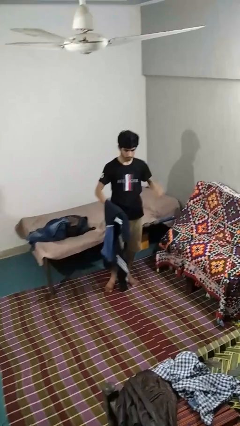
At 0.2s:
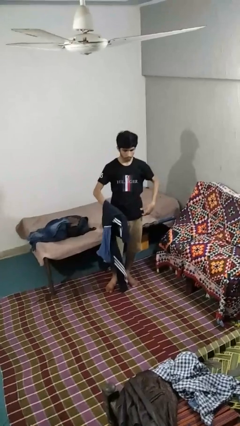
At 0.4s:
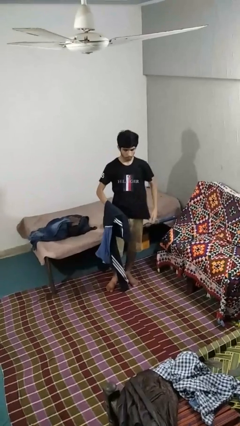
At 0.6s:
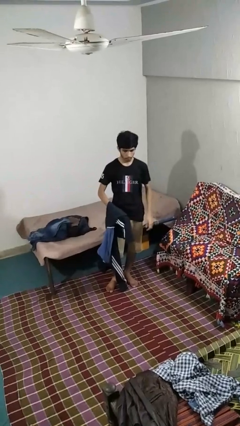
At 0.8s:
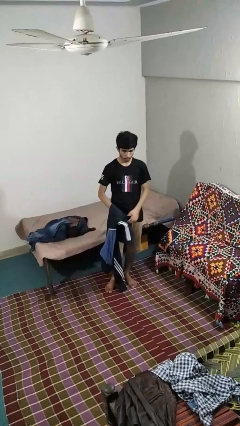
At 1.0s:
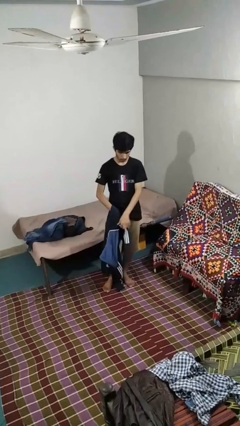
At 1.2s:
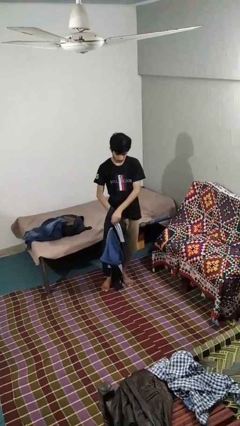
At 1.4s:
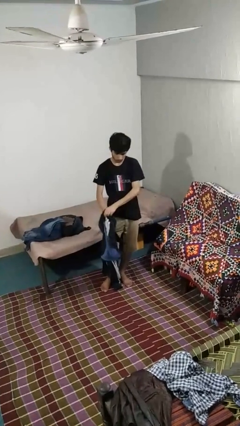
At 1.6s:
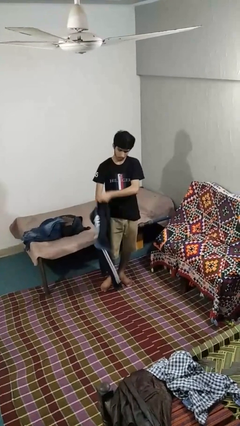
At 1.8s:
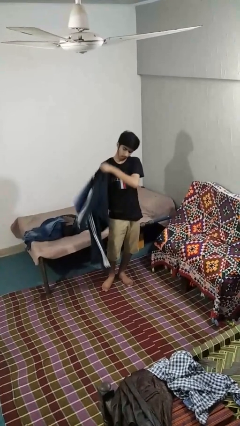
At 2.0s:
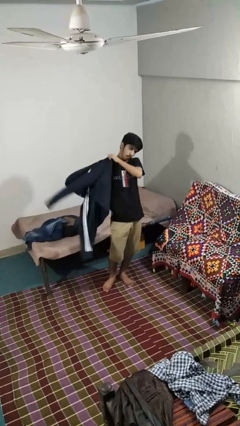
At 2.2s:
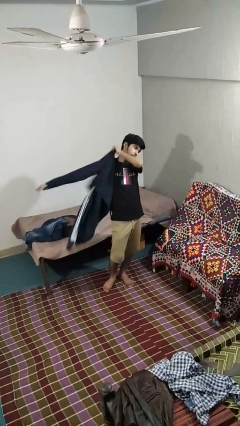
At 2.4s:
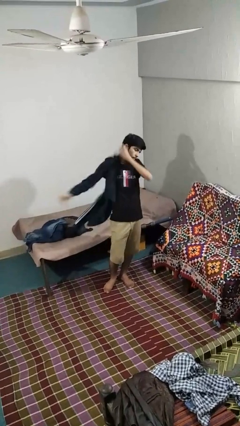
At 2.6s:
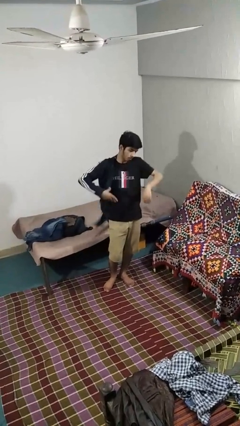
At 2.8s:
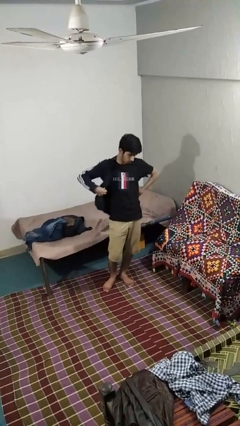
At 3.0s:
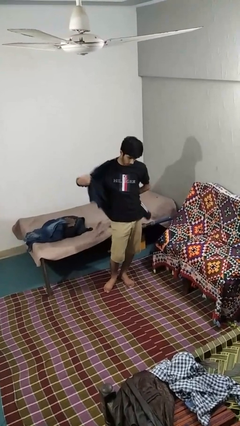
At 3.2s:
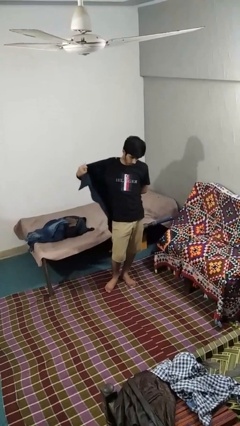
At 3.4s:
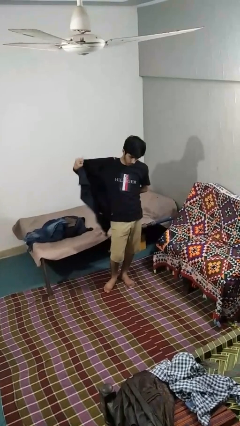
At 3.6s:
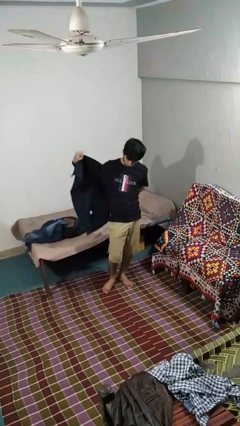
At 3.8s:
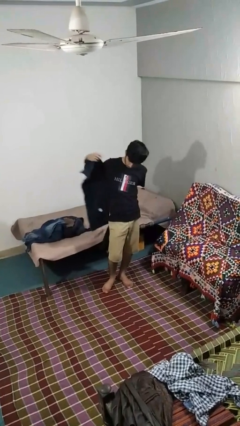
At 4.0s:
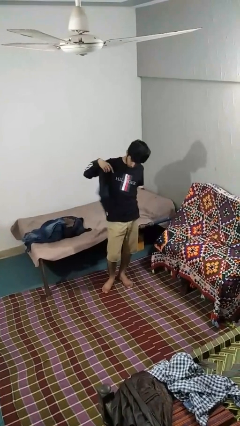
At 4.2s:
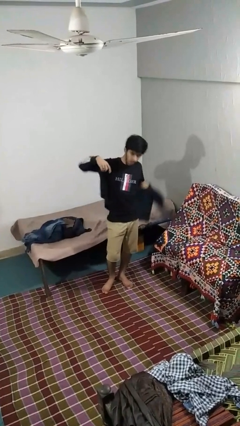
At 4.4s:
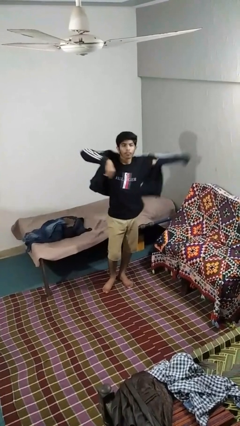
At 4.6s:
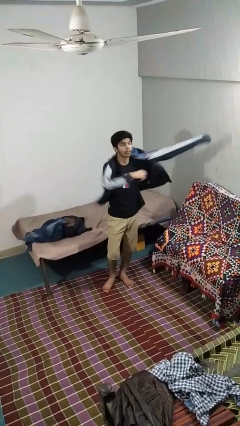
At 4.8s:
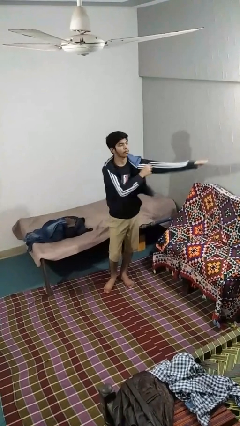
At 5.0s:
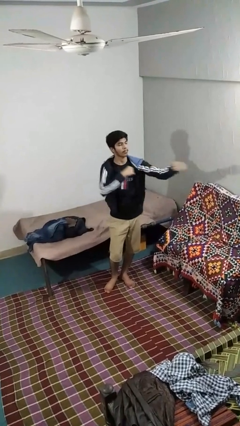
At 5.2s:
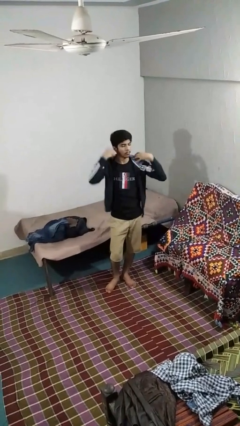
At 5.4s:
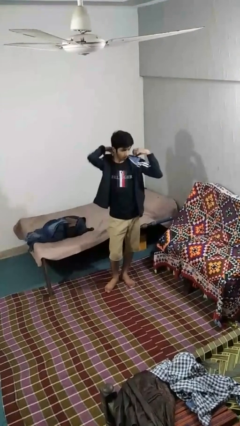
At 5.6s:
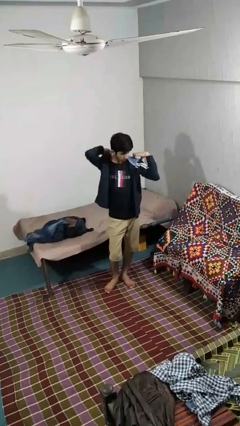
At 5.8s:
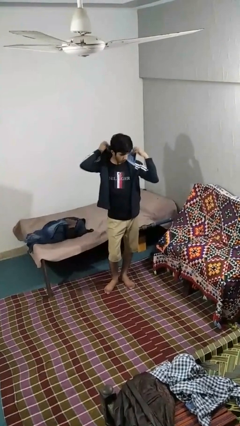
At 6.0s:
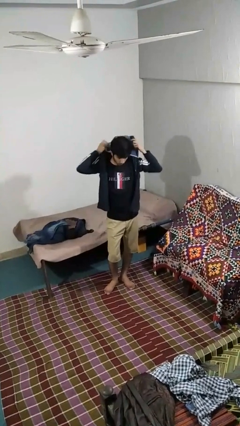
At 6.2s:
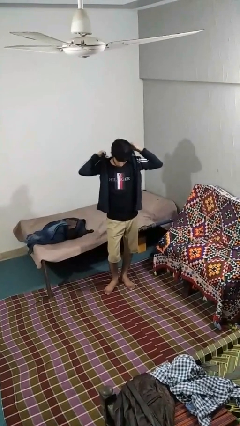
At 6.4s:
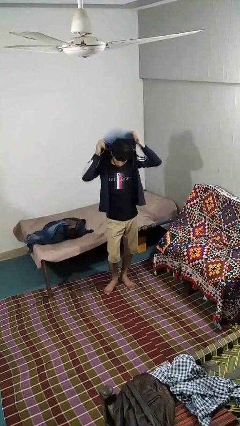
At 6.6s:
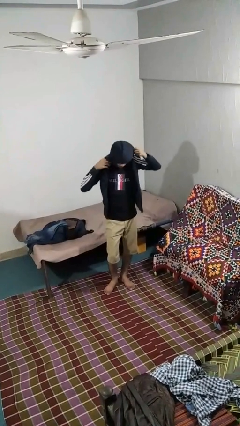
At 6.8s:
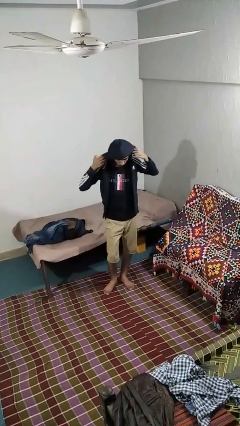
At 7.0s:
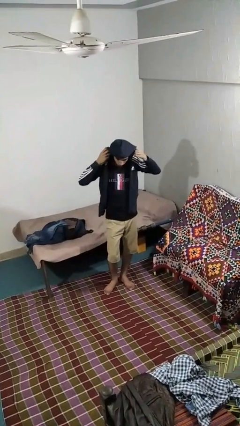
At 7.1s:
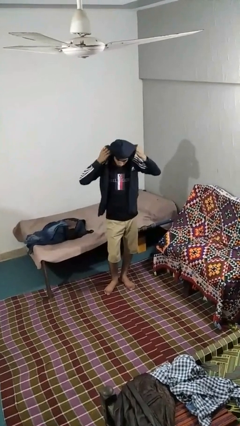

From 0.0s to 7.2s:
person puts on hoodie

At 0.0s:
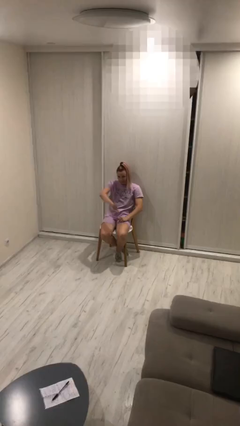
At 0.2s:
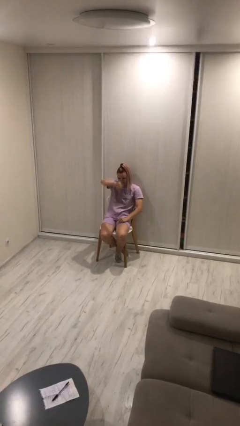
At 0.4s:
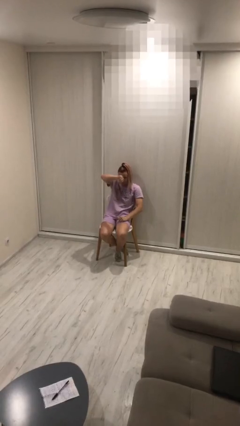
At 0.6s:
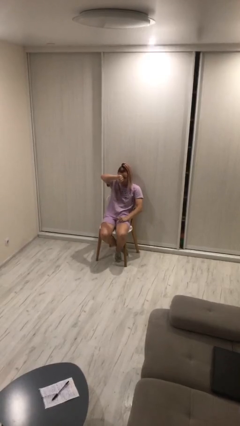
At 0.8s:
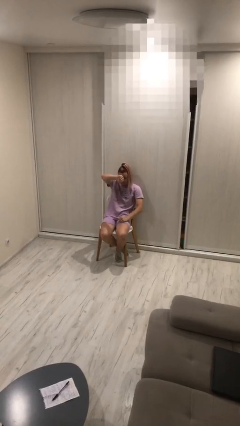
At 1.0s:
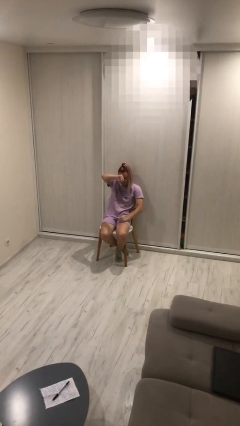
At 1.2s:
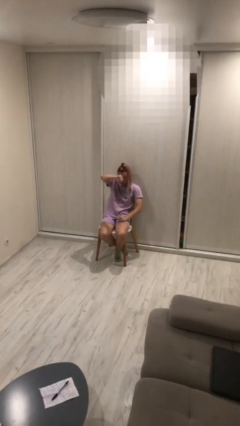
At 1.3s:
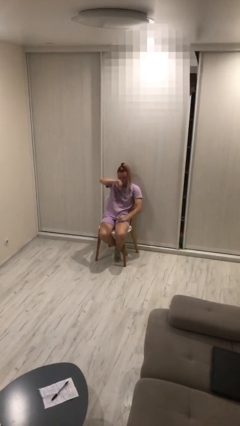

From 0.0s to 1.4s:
person gestures thumbs down

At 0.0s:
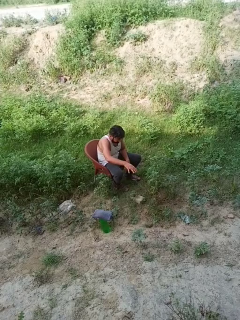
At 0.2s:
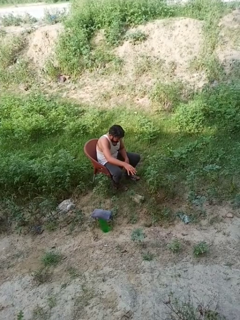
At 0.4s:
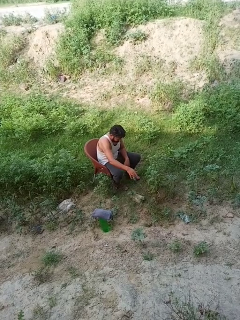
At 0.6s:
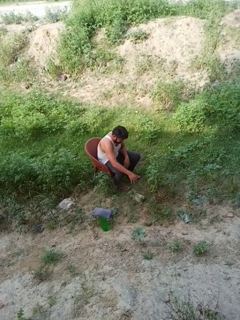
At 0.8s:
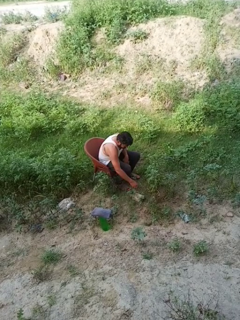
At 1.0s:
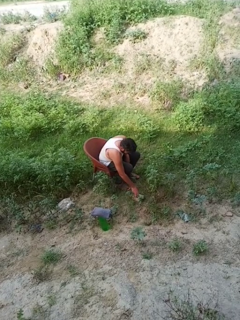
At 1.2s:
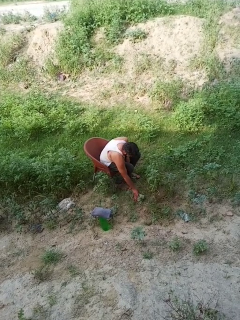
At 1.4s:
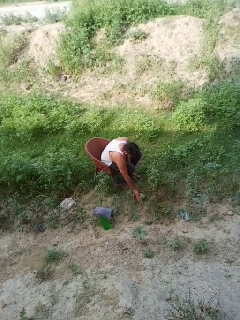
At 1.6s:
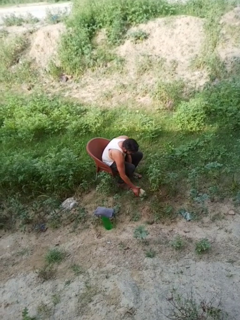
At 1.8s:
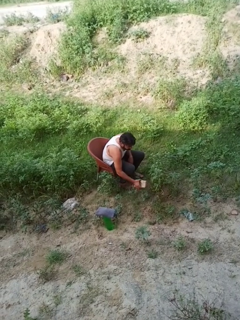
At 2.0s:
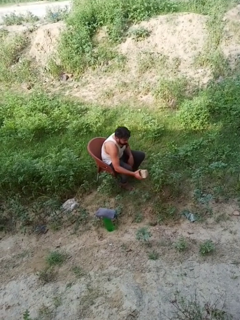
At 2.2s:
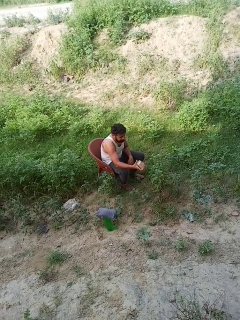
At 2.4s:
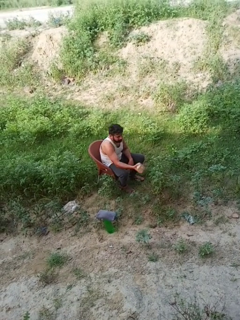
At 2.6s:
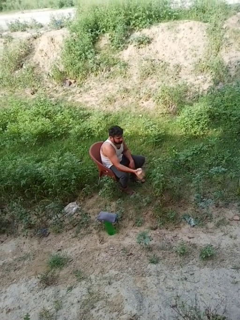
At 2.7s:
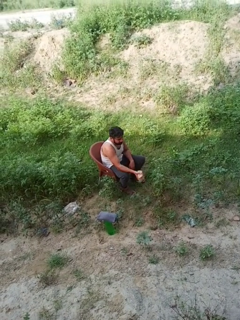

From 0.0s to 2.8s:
person picks up object from floor

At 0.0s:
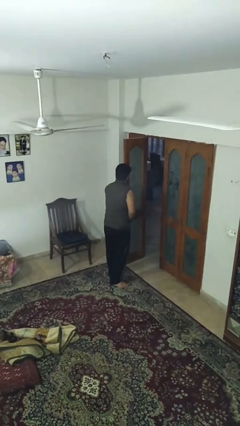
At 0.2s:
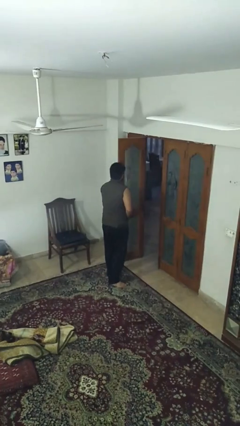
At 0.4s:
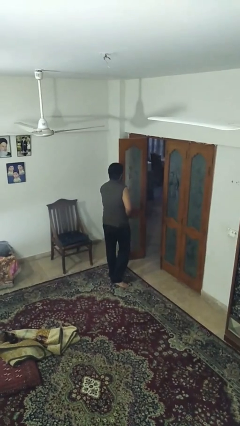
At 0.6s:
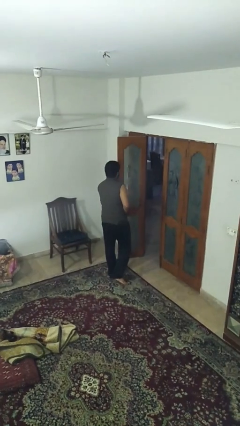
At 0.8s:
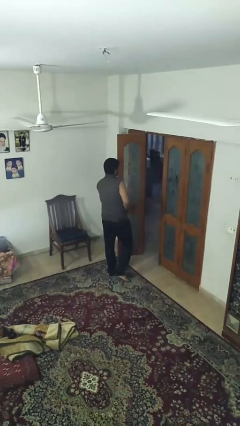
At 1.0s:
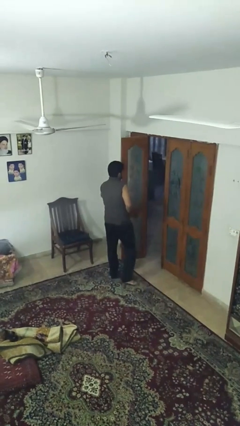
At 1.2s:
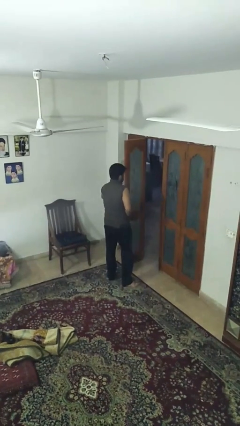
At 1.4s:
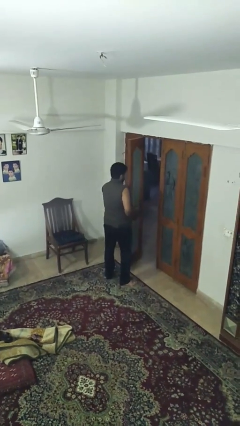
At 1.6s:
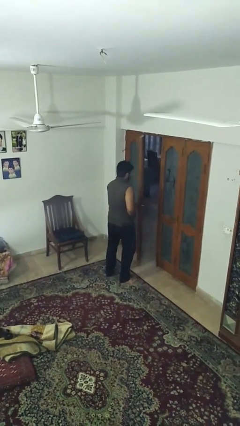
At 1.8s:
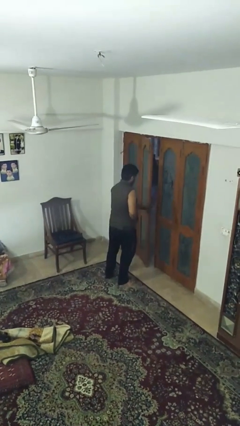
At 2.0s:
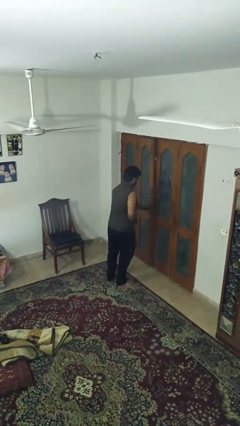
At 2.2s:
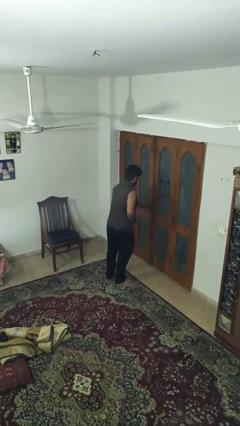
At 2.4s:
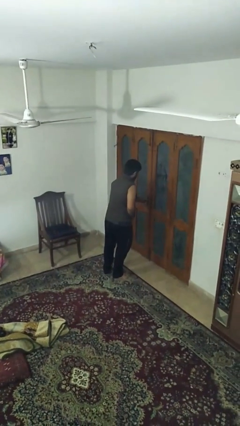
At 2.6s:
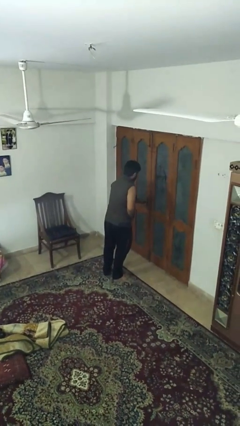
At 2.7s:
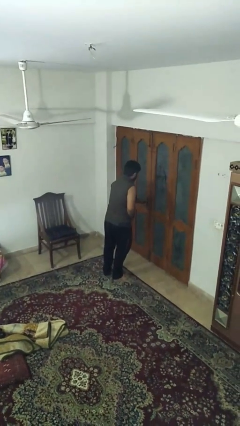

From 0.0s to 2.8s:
person closes facility door

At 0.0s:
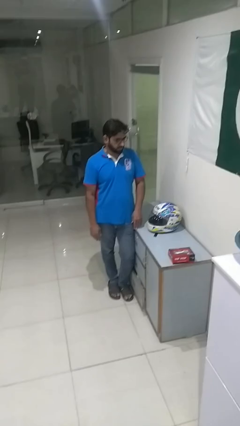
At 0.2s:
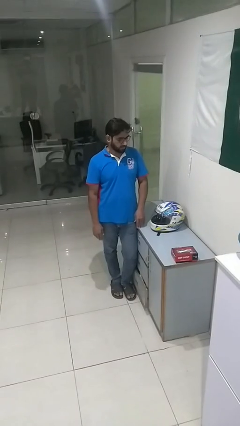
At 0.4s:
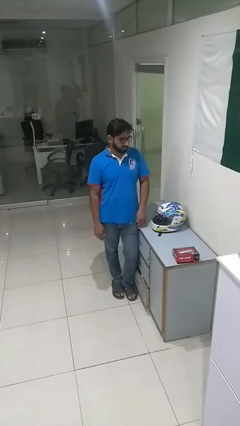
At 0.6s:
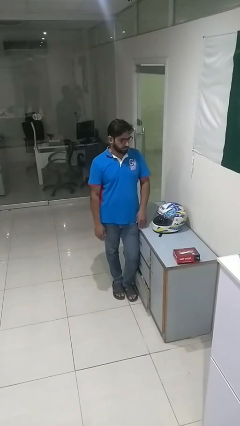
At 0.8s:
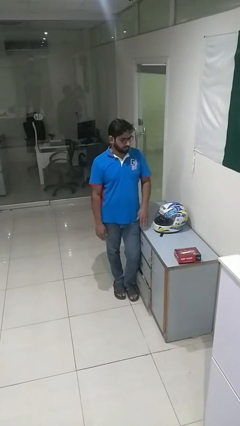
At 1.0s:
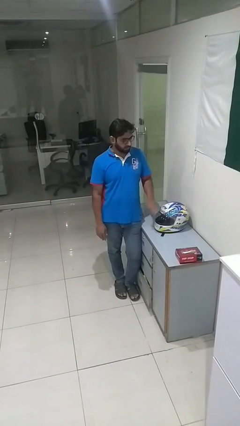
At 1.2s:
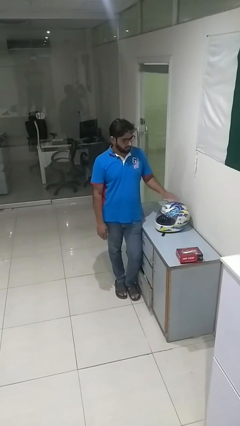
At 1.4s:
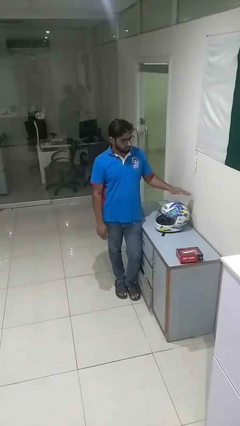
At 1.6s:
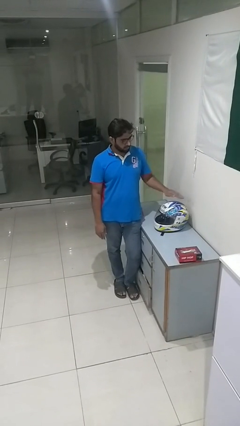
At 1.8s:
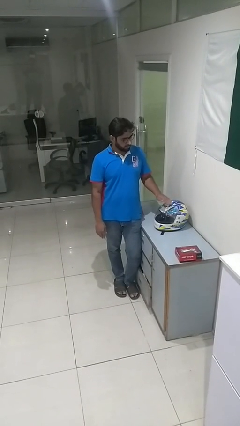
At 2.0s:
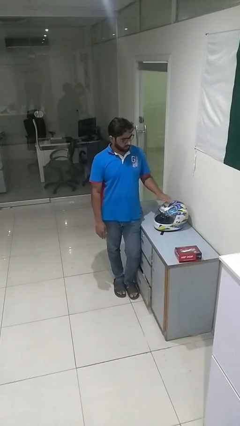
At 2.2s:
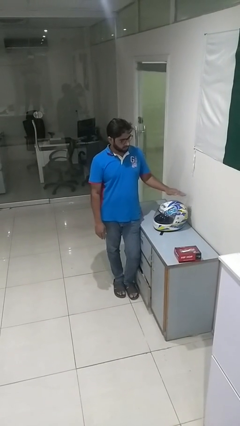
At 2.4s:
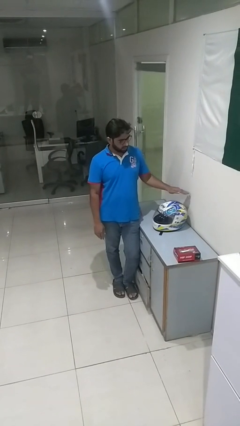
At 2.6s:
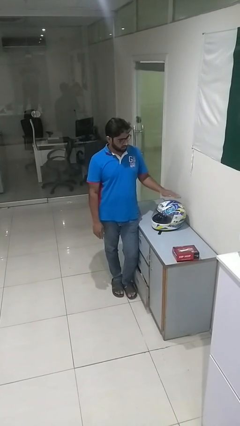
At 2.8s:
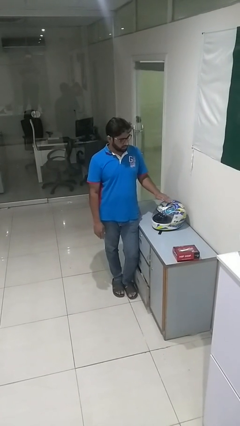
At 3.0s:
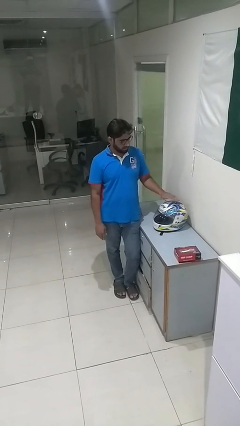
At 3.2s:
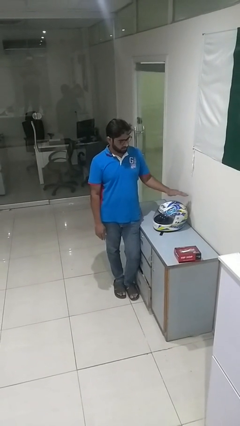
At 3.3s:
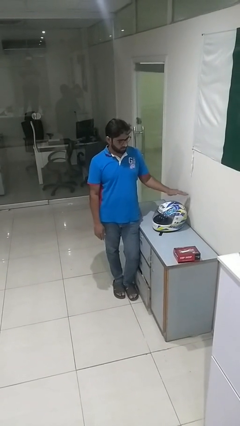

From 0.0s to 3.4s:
person waves hand over object

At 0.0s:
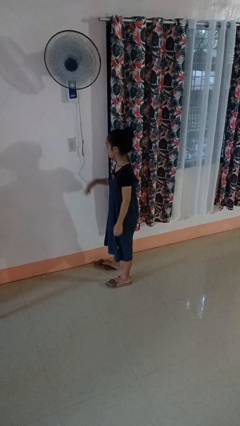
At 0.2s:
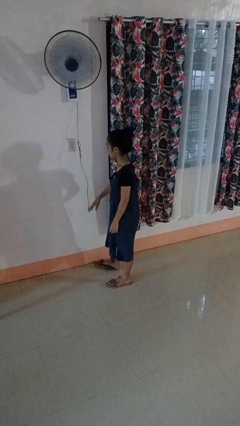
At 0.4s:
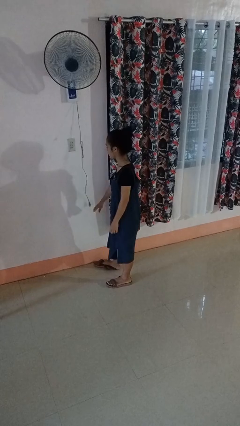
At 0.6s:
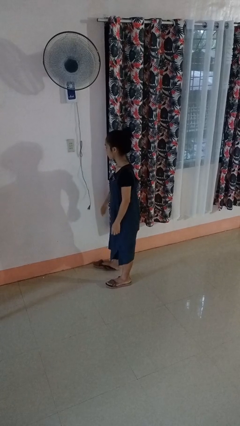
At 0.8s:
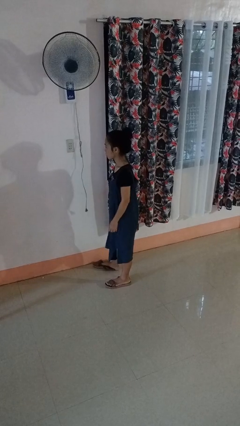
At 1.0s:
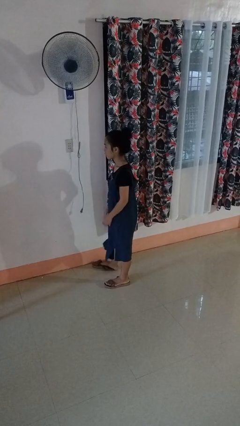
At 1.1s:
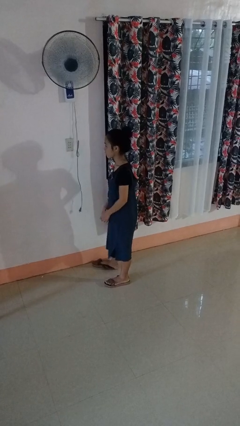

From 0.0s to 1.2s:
person unplugs from electrical socket
